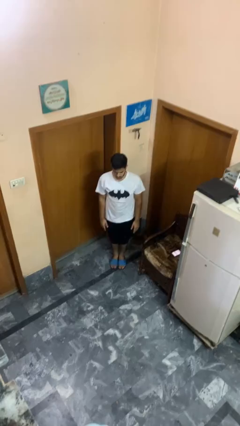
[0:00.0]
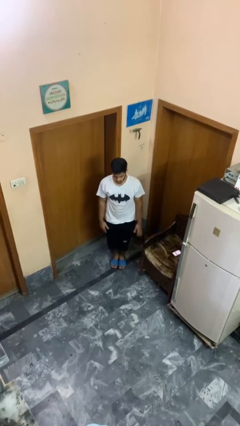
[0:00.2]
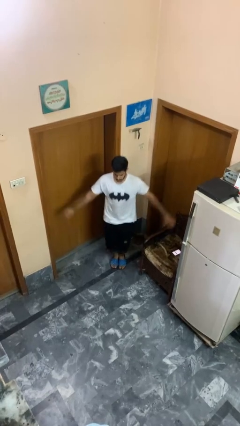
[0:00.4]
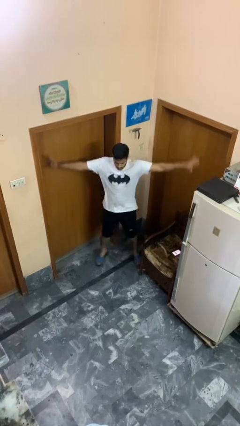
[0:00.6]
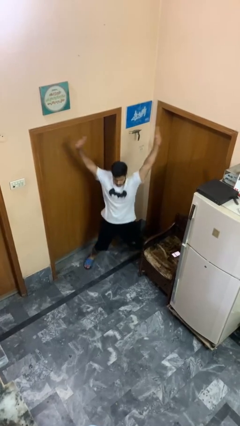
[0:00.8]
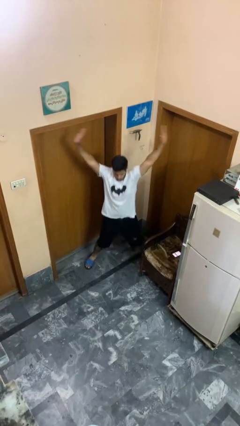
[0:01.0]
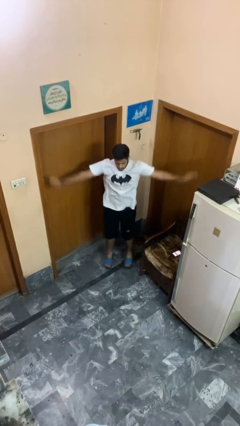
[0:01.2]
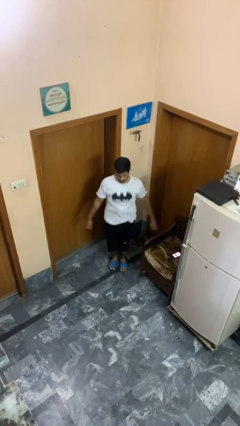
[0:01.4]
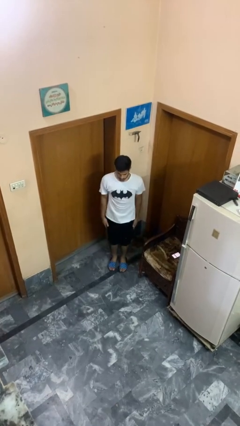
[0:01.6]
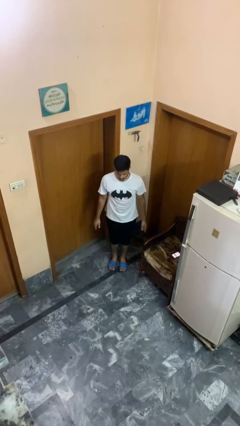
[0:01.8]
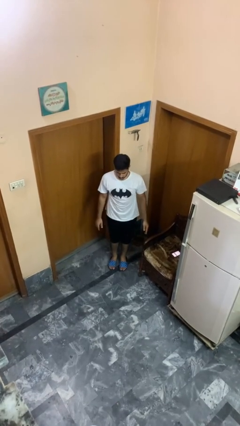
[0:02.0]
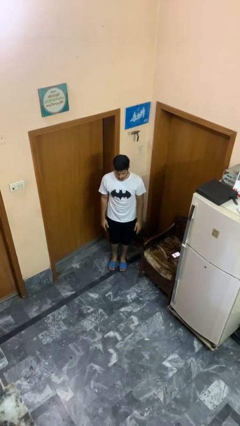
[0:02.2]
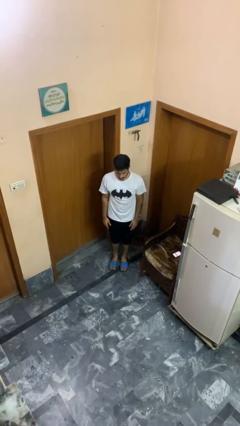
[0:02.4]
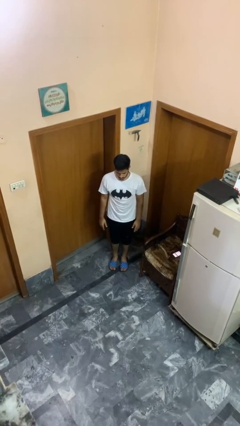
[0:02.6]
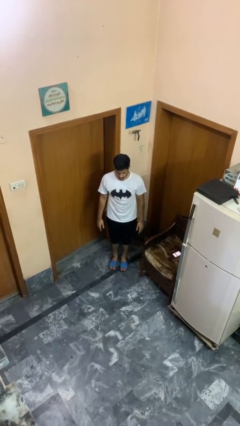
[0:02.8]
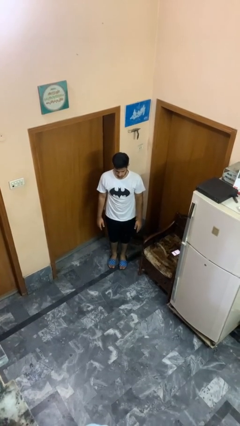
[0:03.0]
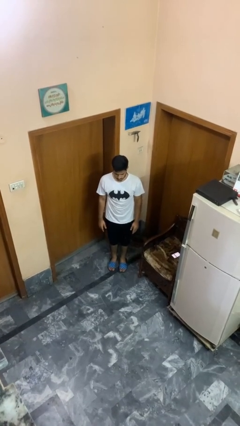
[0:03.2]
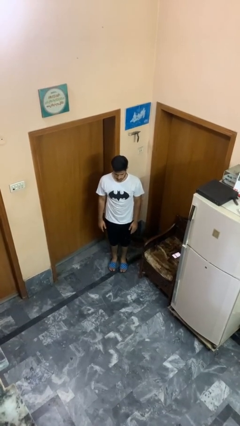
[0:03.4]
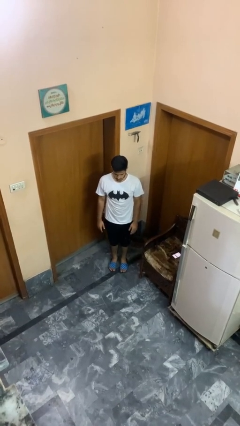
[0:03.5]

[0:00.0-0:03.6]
person exercises with jumping jacks

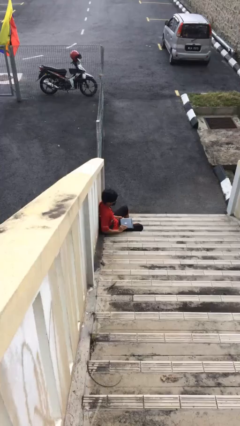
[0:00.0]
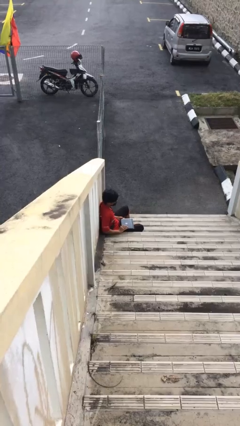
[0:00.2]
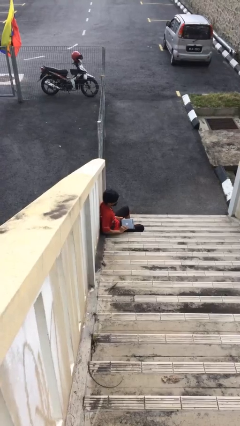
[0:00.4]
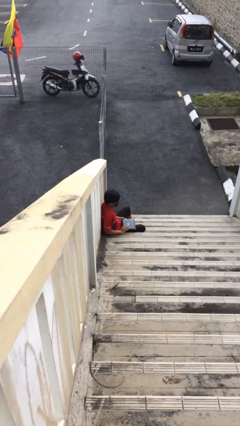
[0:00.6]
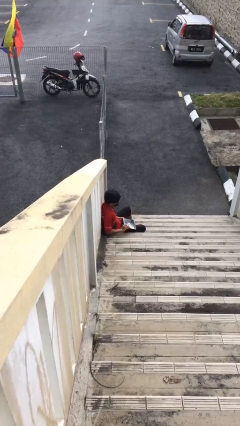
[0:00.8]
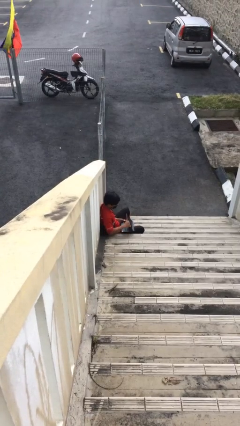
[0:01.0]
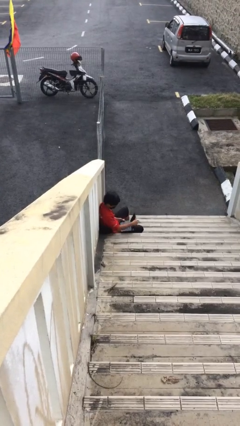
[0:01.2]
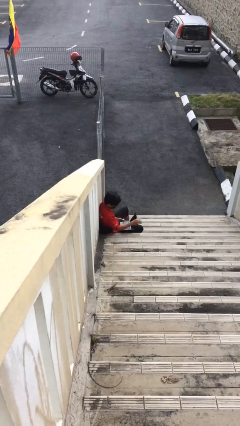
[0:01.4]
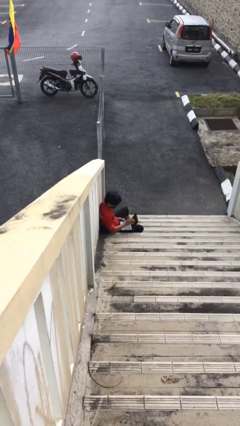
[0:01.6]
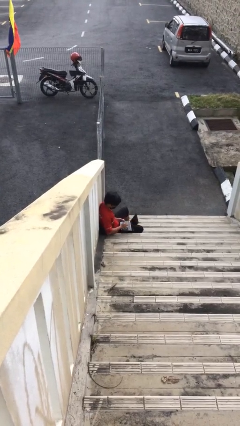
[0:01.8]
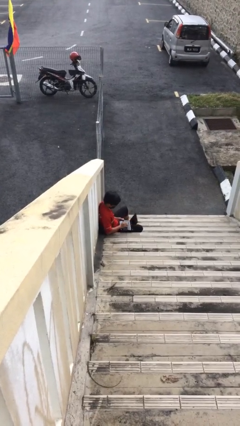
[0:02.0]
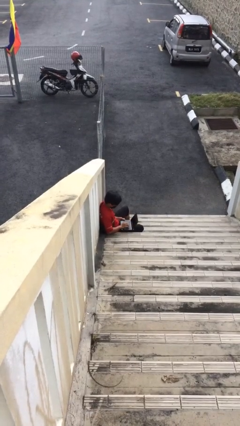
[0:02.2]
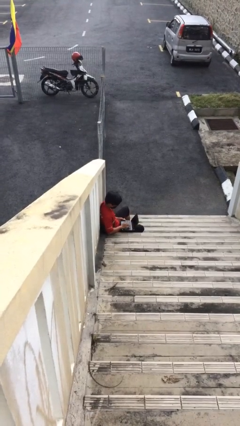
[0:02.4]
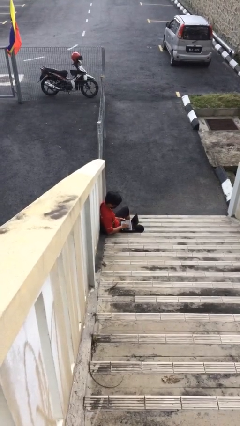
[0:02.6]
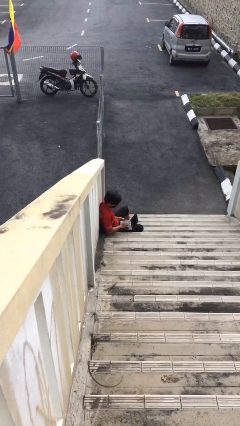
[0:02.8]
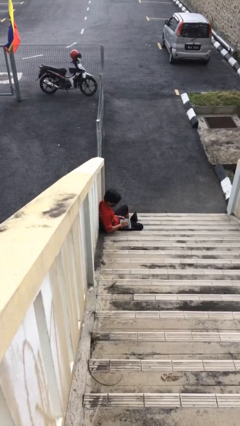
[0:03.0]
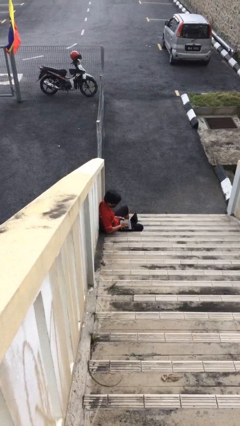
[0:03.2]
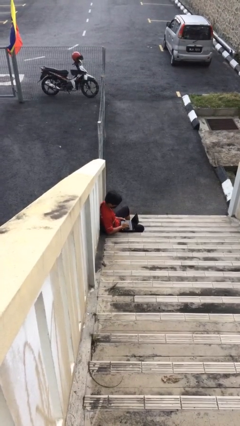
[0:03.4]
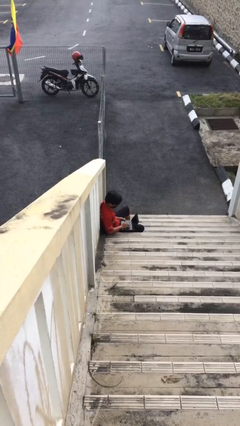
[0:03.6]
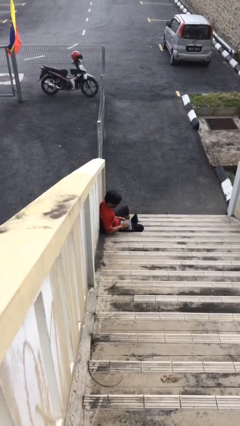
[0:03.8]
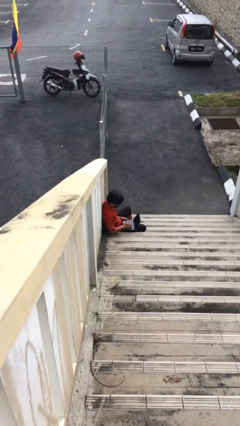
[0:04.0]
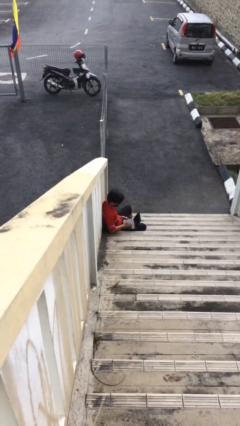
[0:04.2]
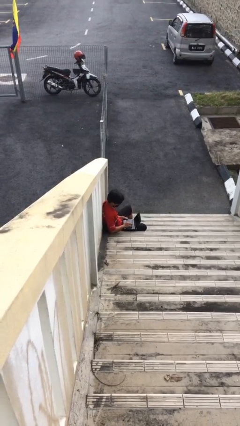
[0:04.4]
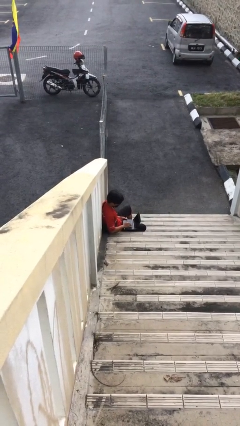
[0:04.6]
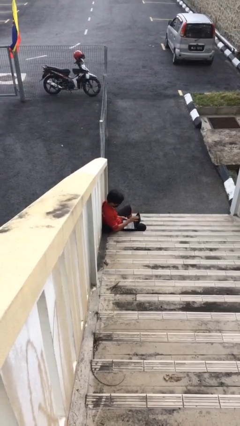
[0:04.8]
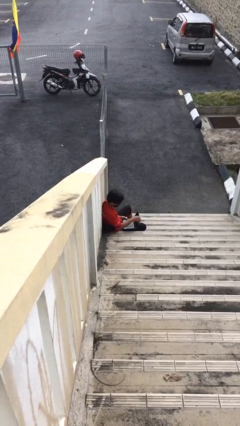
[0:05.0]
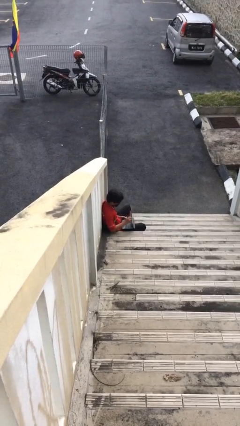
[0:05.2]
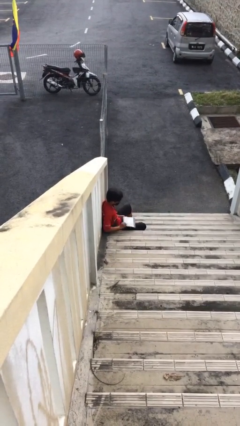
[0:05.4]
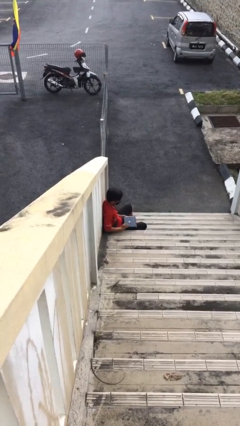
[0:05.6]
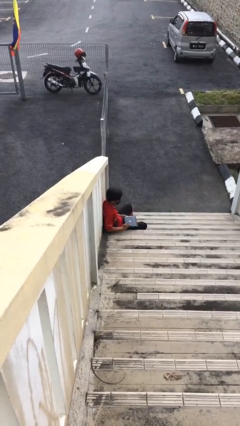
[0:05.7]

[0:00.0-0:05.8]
person interacts with laptop

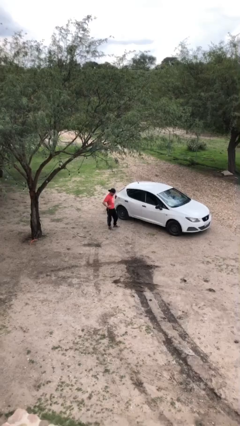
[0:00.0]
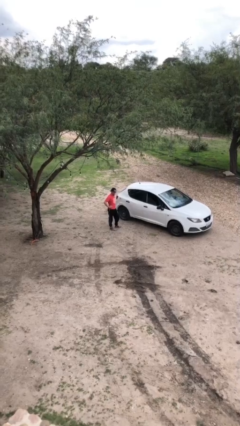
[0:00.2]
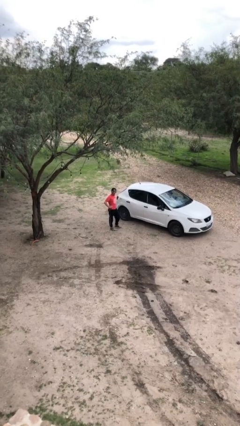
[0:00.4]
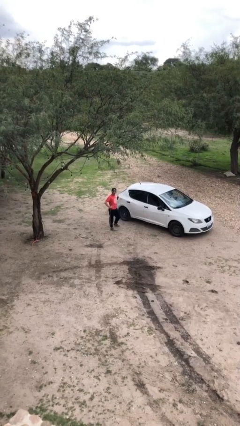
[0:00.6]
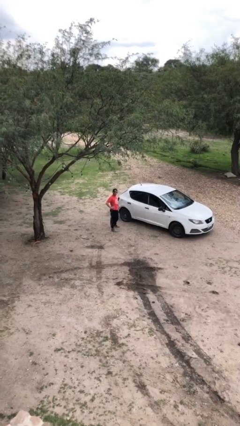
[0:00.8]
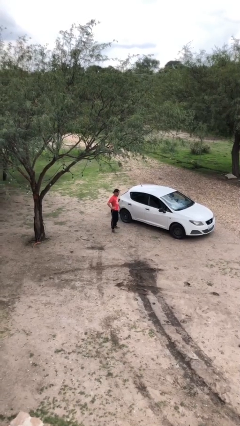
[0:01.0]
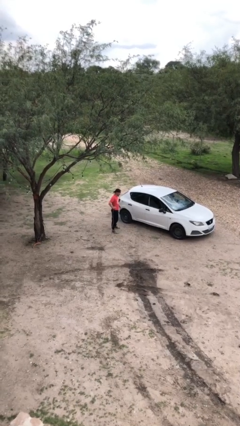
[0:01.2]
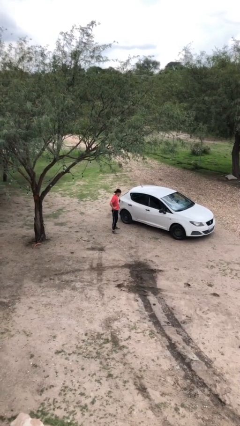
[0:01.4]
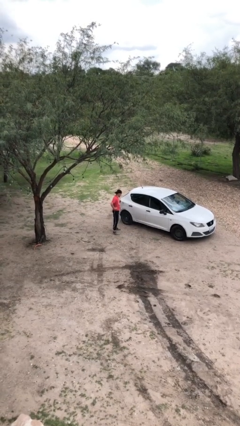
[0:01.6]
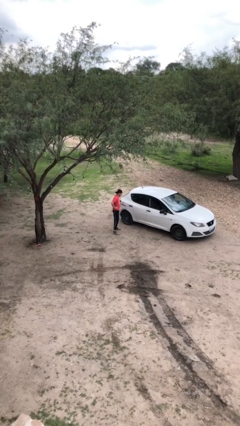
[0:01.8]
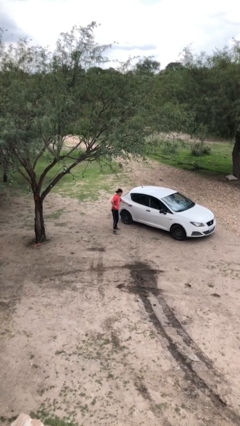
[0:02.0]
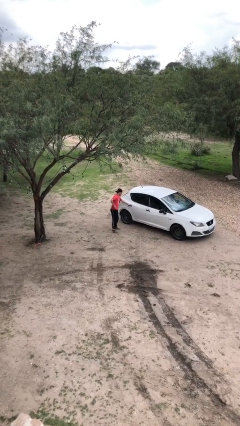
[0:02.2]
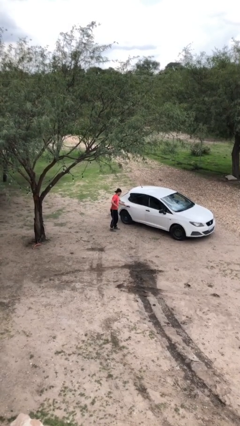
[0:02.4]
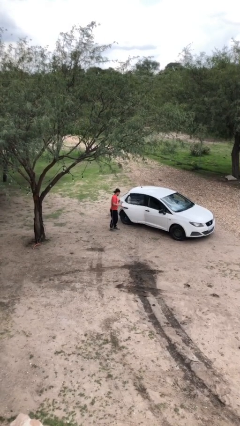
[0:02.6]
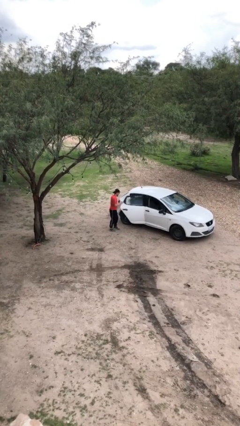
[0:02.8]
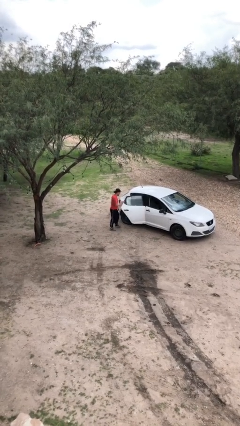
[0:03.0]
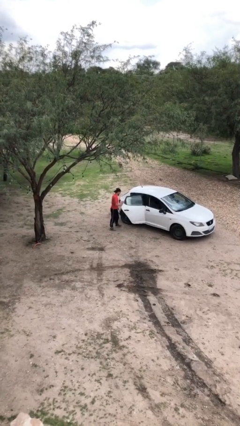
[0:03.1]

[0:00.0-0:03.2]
person opens car door

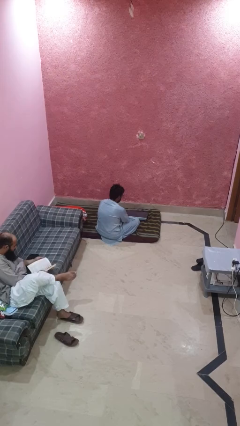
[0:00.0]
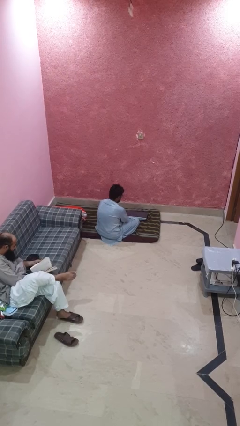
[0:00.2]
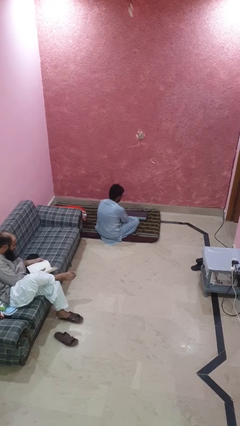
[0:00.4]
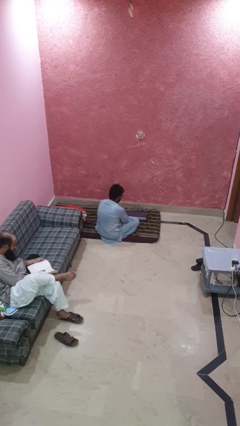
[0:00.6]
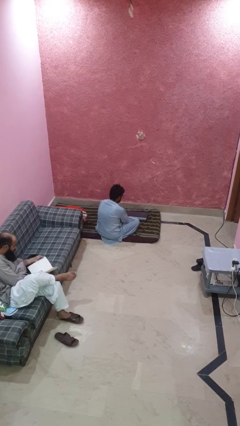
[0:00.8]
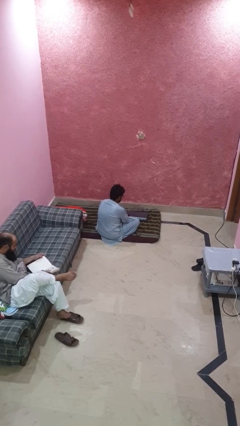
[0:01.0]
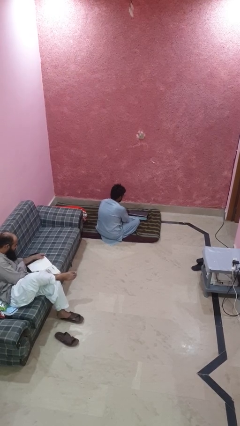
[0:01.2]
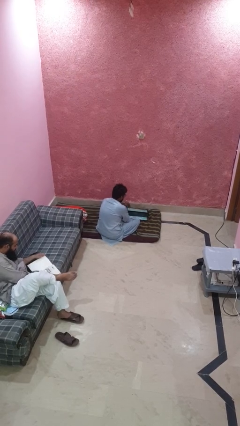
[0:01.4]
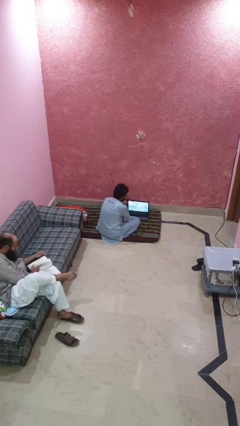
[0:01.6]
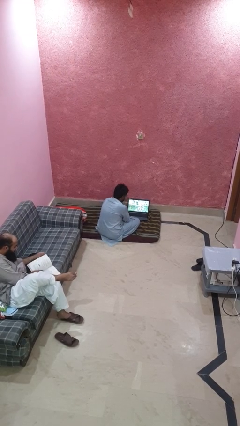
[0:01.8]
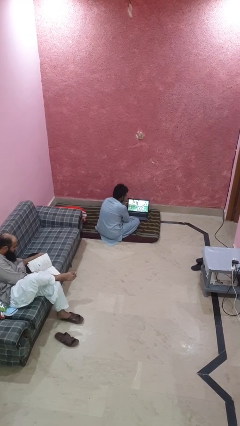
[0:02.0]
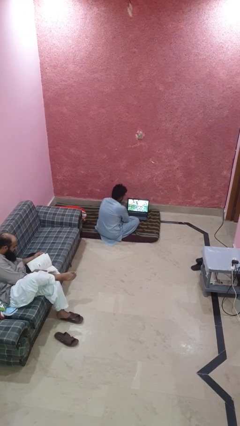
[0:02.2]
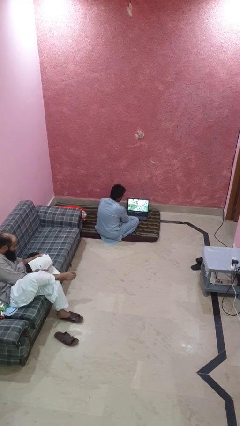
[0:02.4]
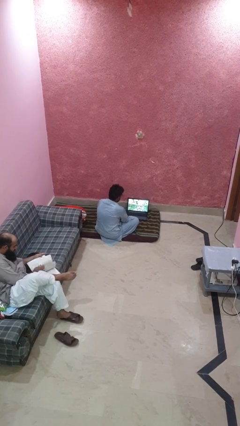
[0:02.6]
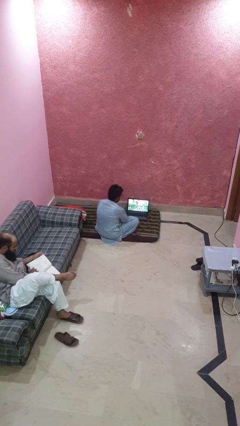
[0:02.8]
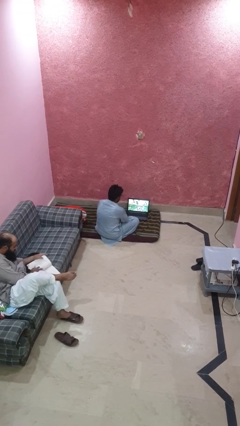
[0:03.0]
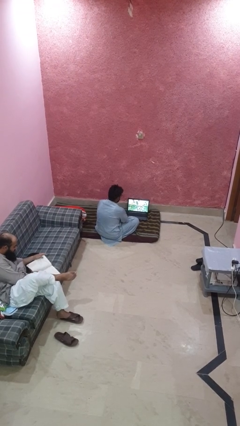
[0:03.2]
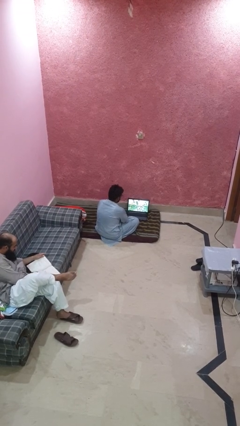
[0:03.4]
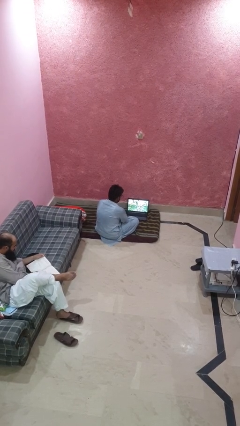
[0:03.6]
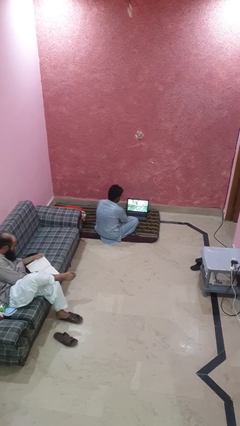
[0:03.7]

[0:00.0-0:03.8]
person opens laptop

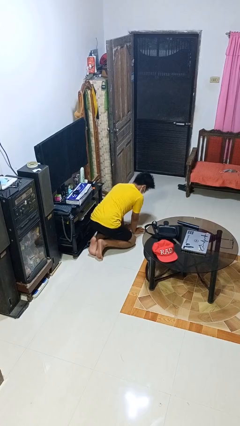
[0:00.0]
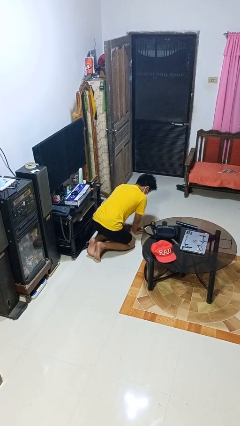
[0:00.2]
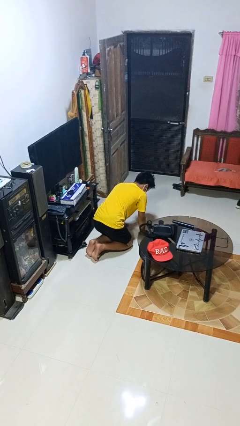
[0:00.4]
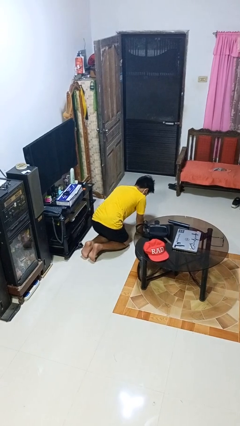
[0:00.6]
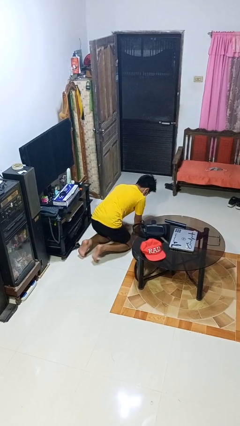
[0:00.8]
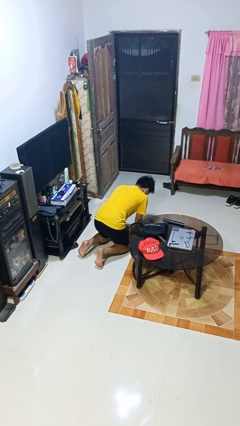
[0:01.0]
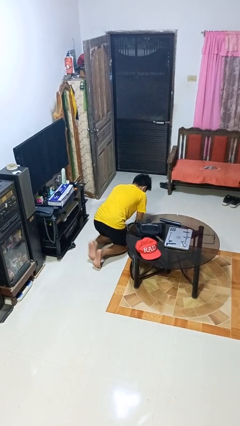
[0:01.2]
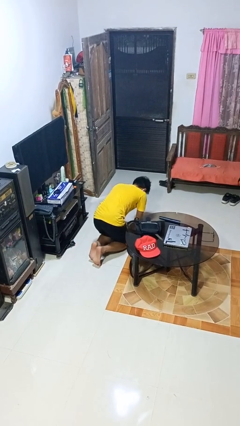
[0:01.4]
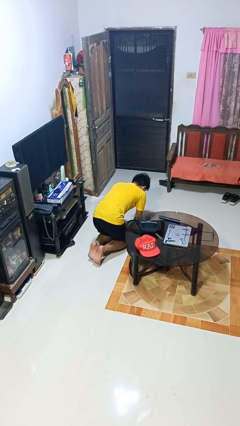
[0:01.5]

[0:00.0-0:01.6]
person crawls
